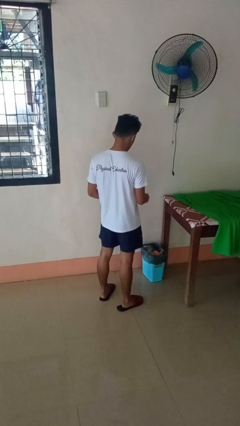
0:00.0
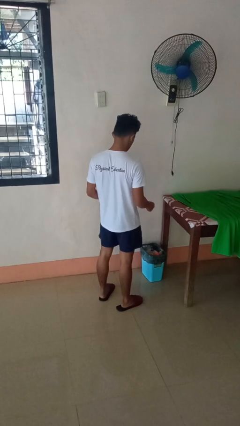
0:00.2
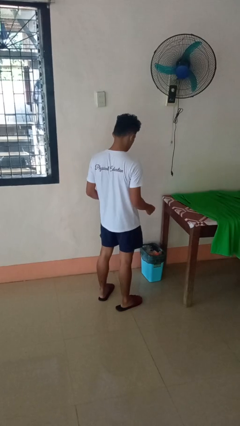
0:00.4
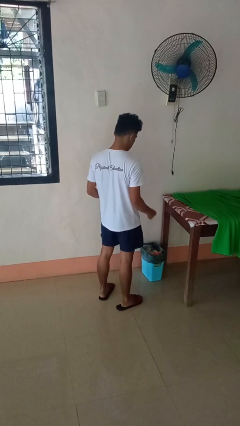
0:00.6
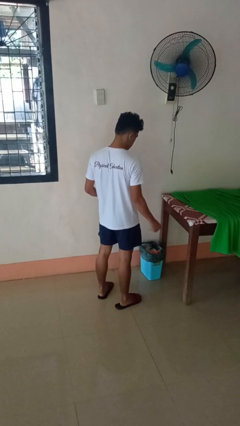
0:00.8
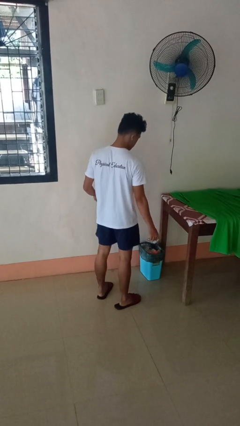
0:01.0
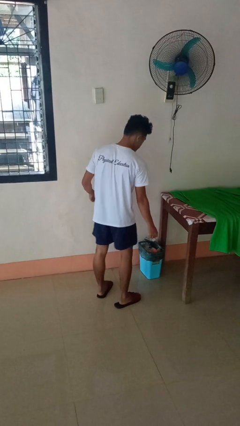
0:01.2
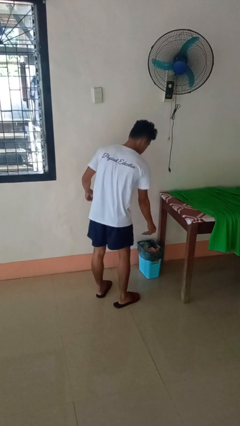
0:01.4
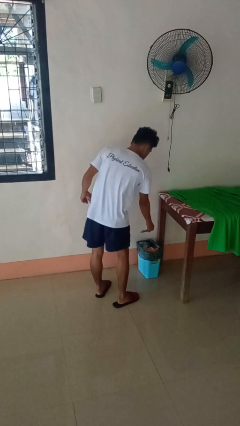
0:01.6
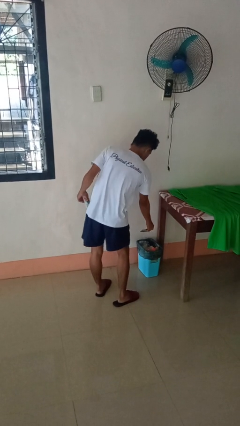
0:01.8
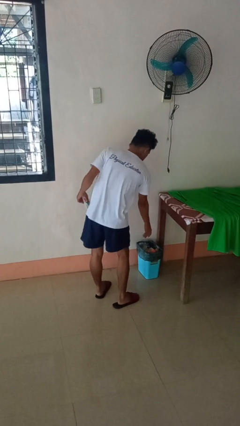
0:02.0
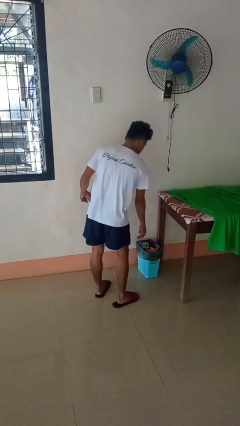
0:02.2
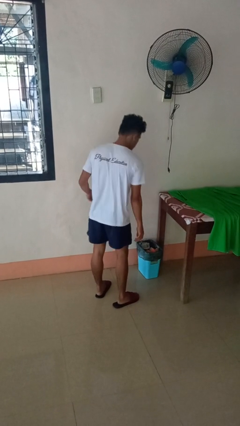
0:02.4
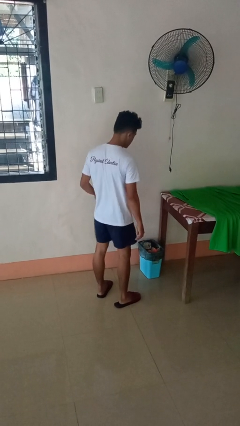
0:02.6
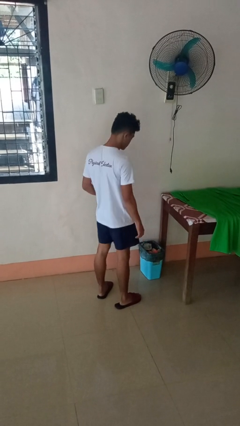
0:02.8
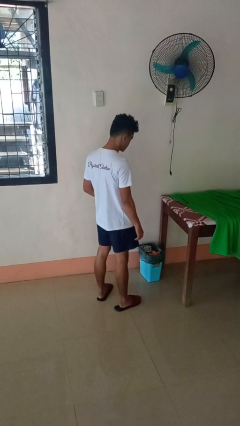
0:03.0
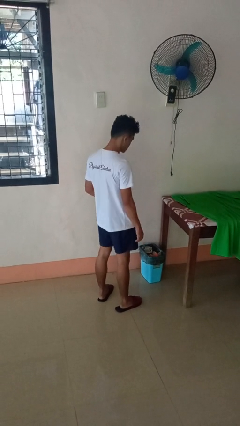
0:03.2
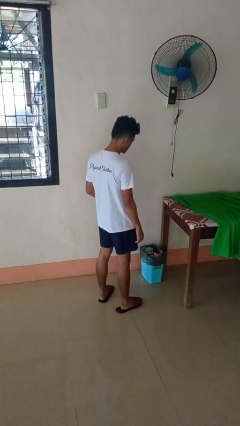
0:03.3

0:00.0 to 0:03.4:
person discards trash

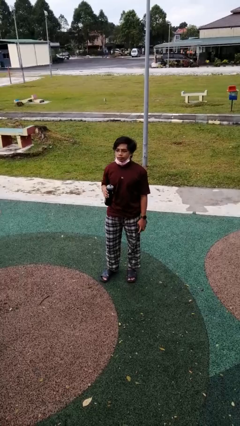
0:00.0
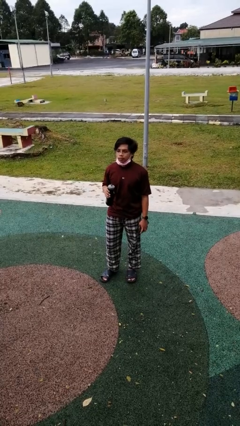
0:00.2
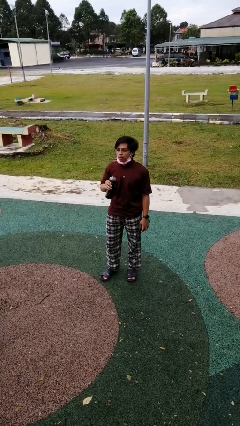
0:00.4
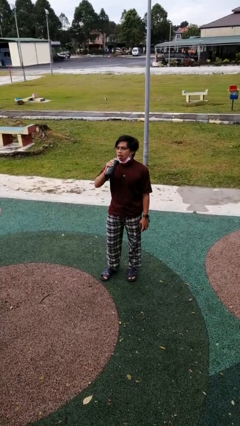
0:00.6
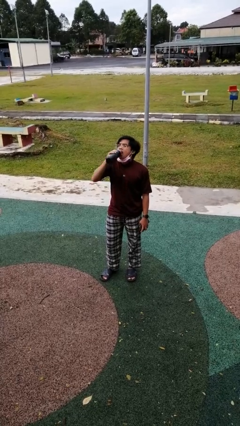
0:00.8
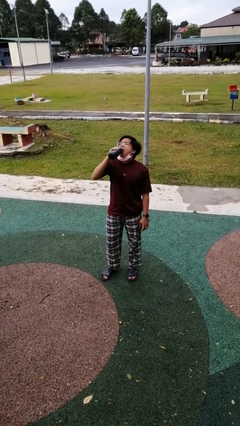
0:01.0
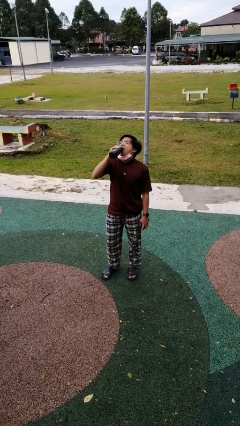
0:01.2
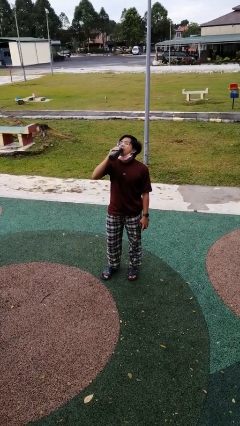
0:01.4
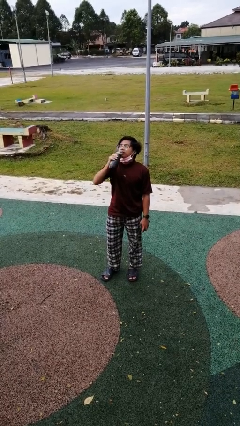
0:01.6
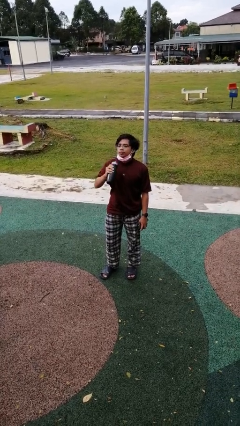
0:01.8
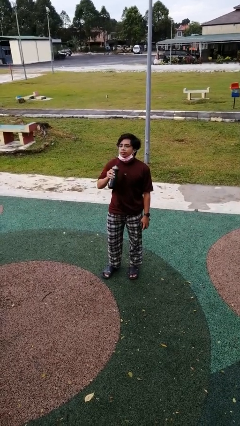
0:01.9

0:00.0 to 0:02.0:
person drinks from bottle

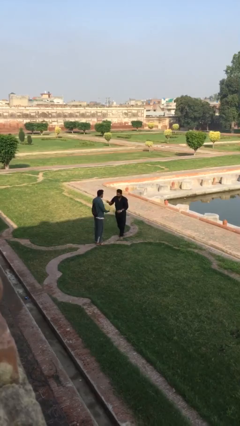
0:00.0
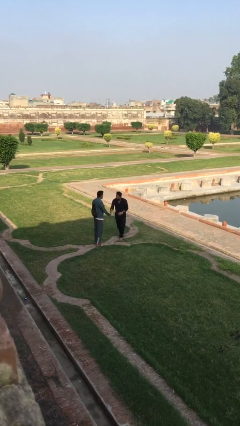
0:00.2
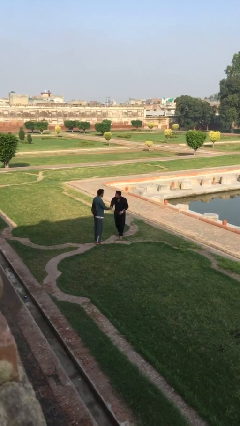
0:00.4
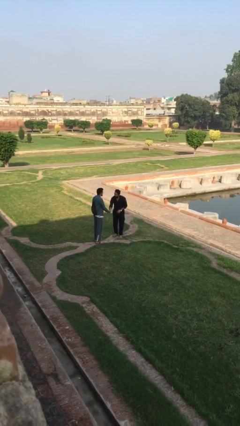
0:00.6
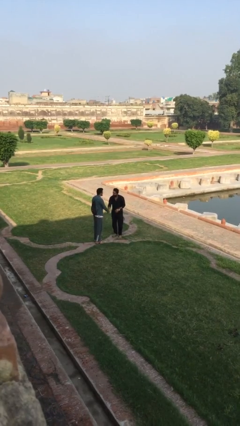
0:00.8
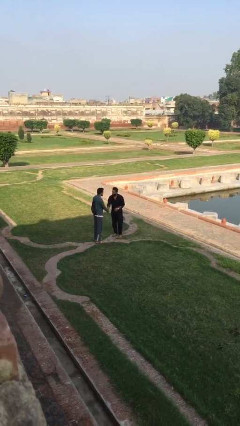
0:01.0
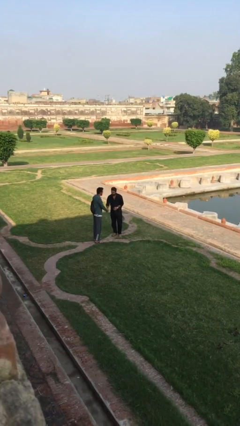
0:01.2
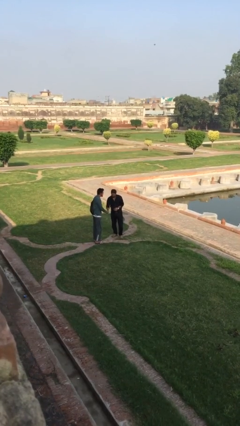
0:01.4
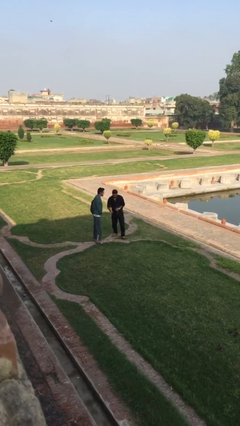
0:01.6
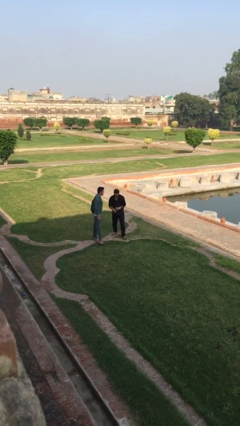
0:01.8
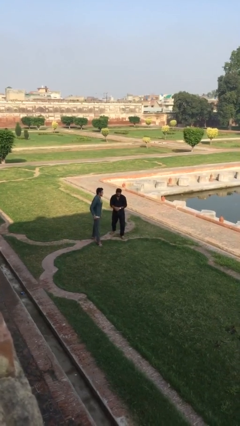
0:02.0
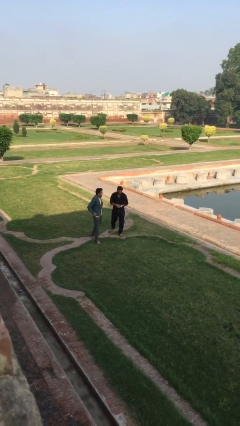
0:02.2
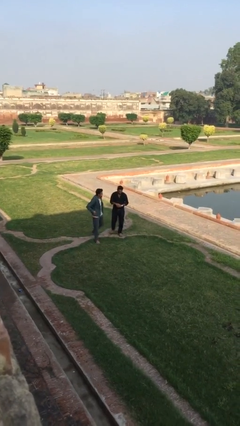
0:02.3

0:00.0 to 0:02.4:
person shakes hand

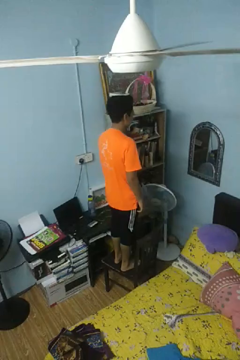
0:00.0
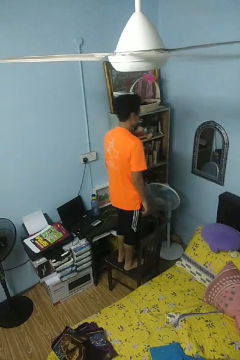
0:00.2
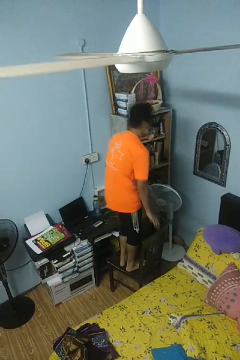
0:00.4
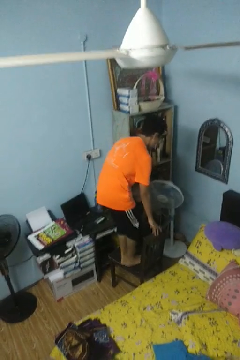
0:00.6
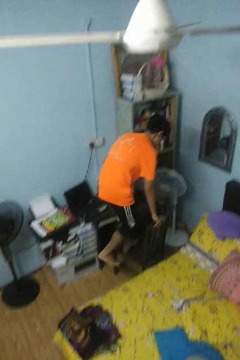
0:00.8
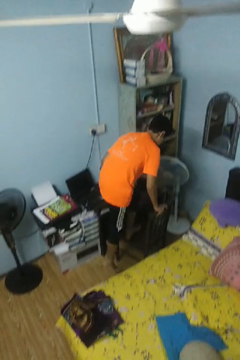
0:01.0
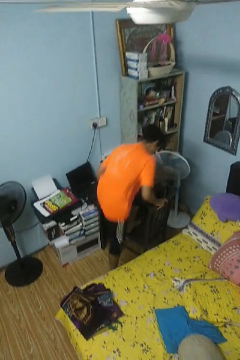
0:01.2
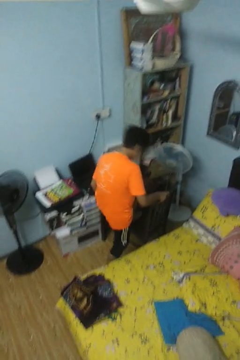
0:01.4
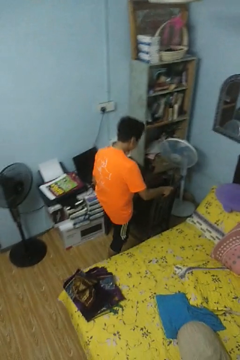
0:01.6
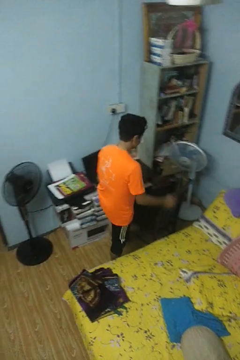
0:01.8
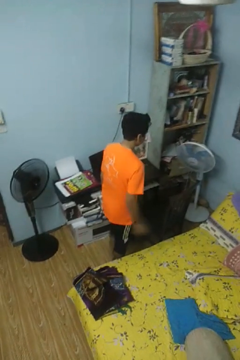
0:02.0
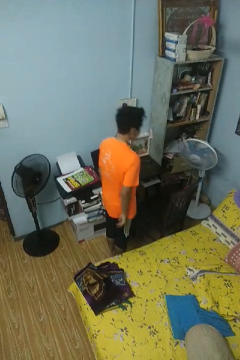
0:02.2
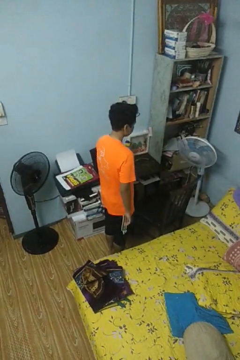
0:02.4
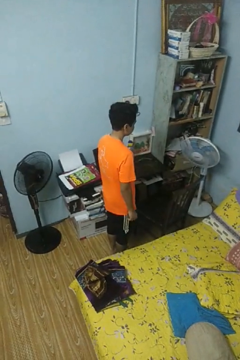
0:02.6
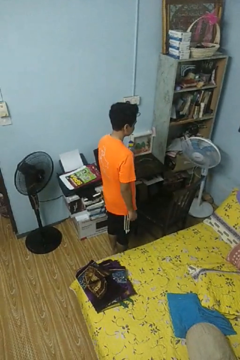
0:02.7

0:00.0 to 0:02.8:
person climbs off chair

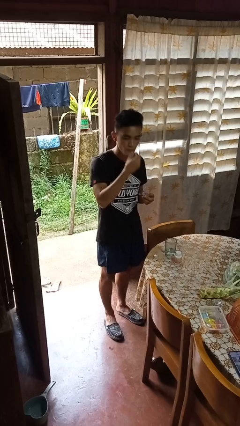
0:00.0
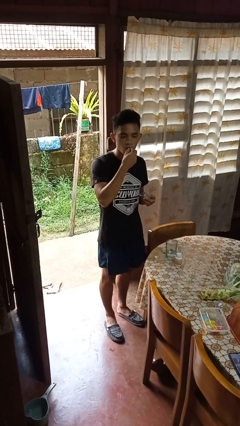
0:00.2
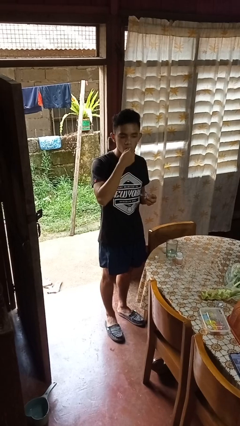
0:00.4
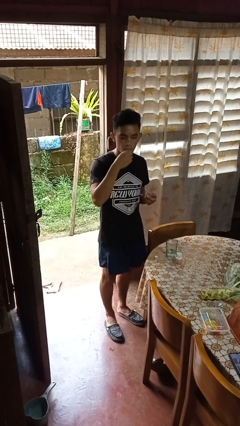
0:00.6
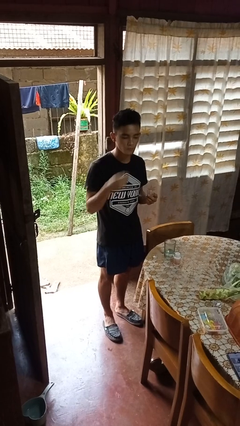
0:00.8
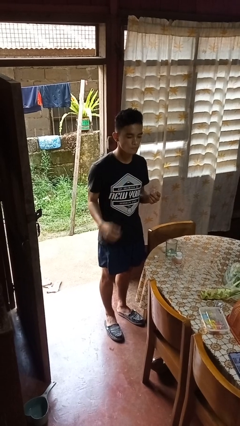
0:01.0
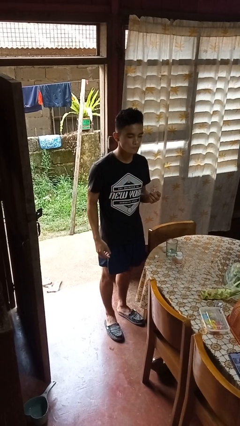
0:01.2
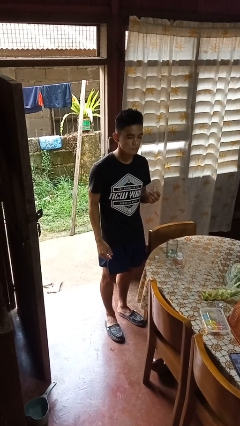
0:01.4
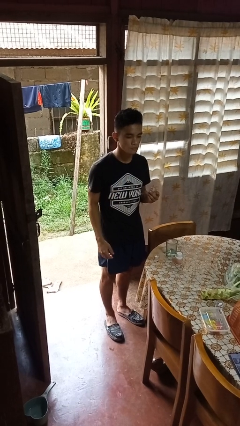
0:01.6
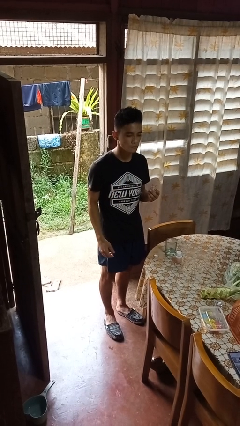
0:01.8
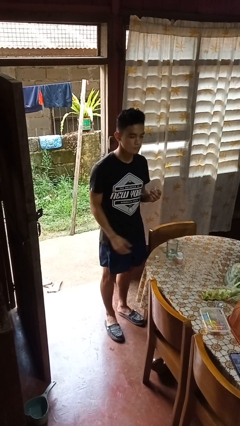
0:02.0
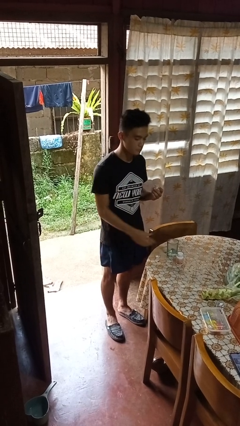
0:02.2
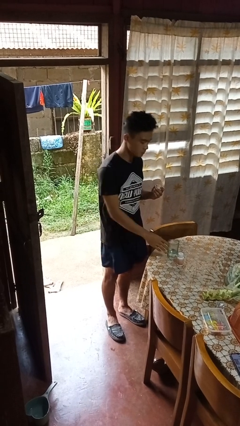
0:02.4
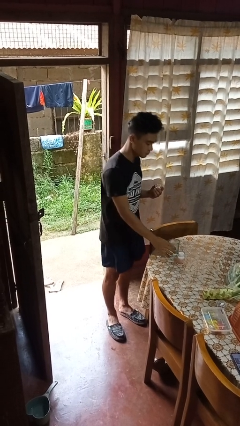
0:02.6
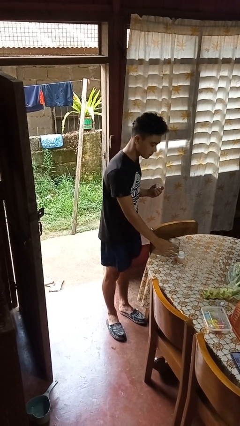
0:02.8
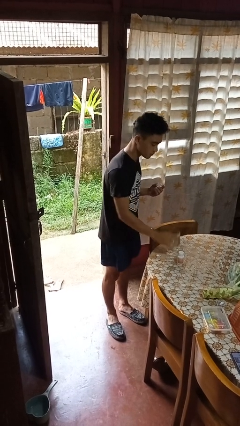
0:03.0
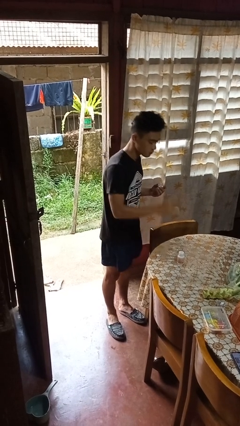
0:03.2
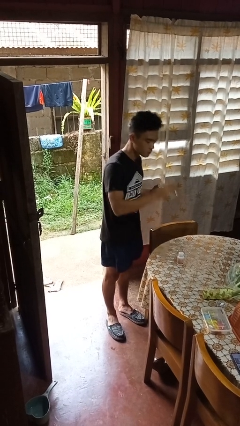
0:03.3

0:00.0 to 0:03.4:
person takes medicine pills

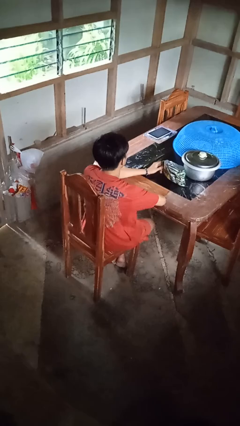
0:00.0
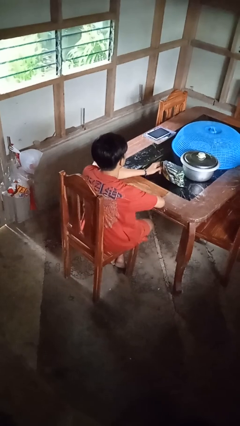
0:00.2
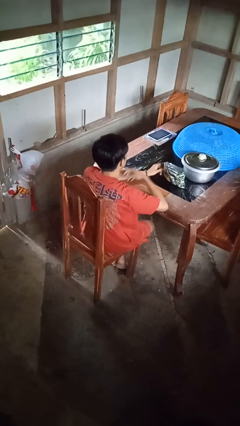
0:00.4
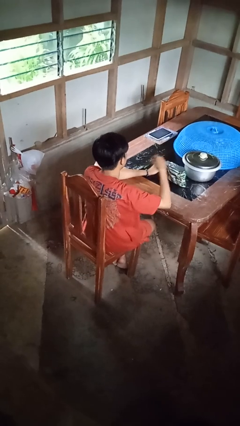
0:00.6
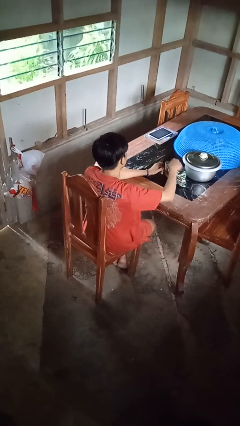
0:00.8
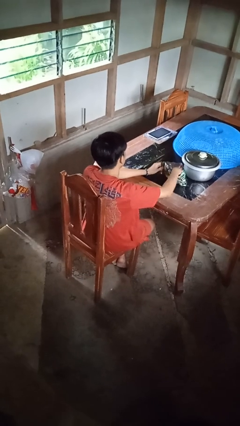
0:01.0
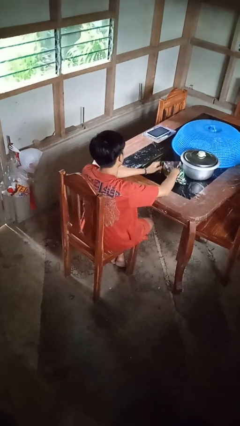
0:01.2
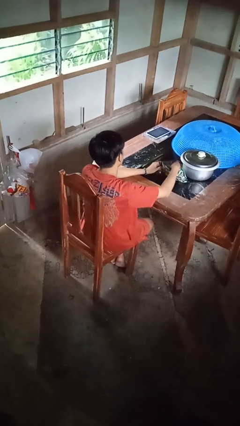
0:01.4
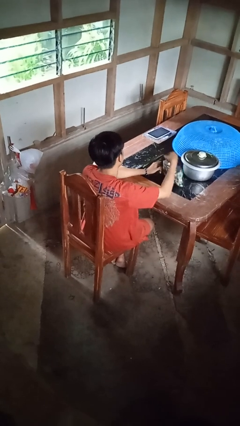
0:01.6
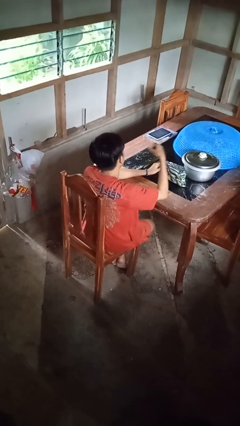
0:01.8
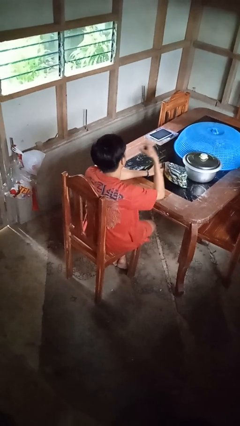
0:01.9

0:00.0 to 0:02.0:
person eats snack from bag

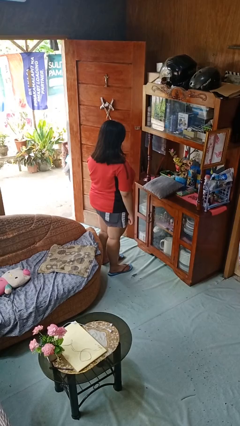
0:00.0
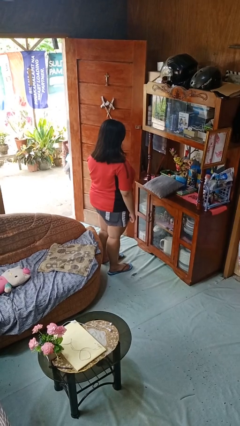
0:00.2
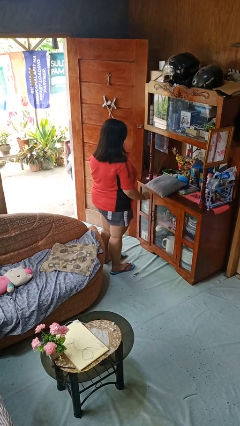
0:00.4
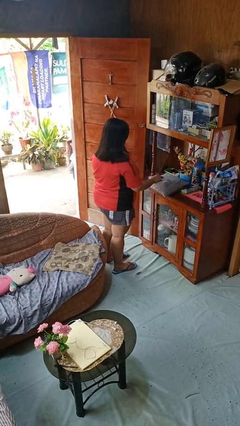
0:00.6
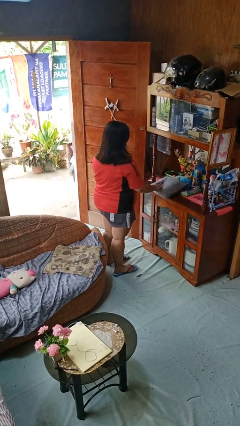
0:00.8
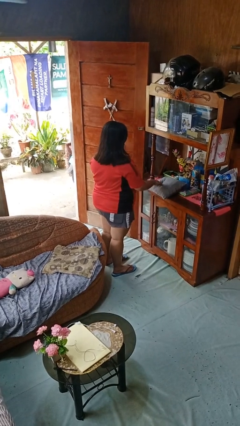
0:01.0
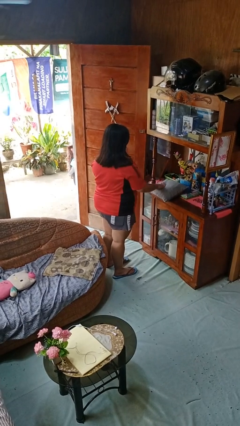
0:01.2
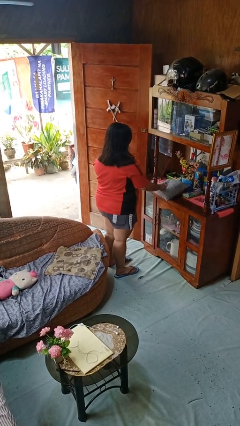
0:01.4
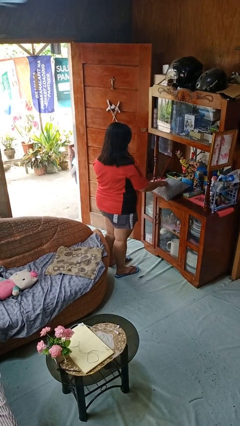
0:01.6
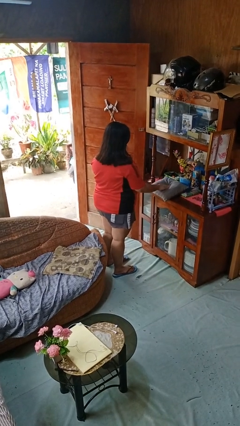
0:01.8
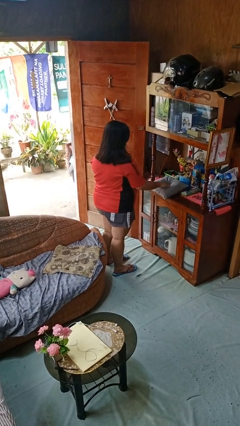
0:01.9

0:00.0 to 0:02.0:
person taps object with finger
